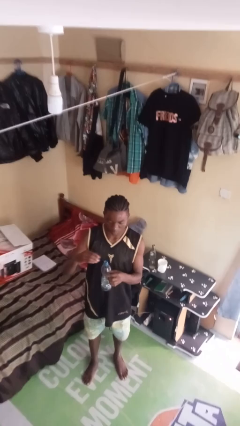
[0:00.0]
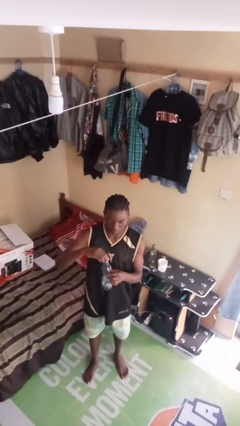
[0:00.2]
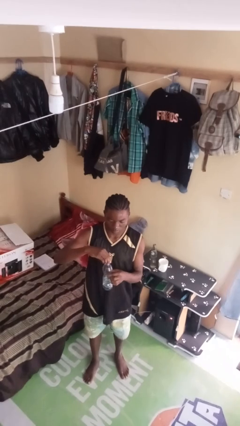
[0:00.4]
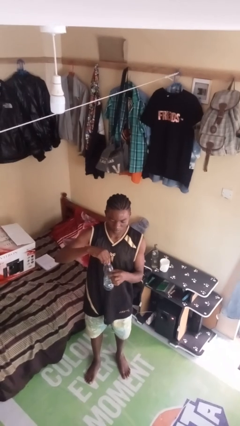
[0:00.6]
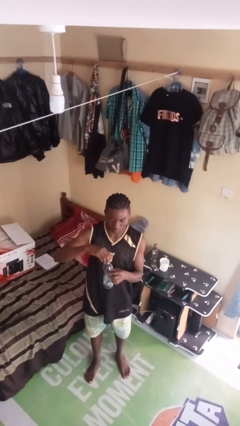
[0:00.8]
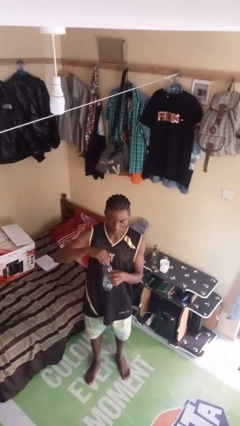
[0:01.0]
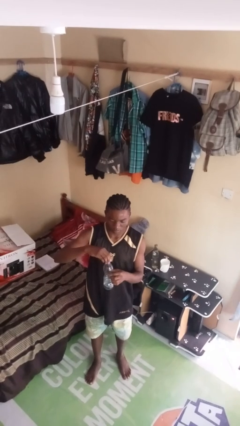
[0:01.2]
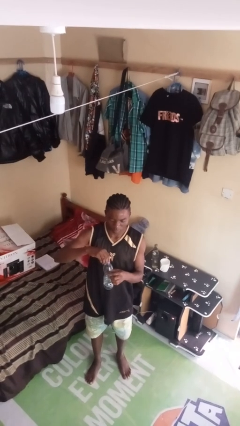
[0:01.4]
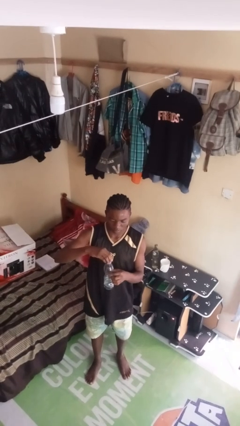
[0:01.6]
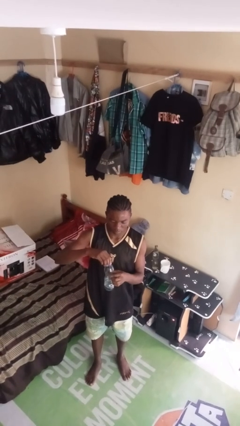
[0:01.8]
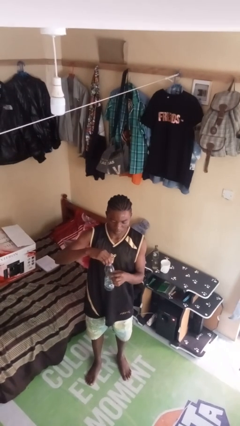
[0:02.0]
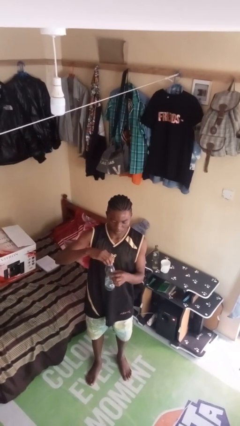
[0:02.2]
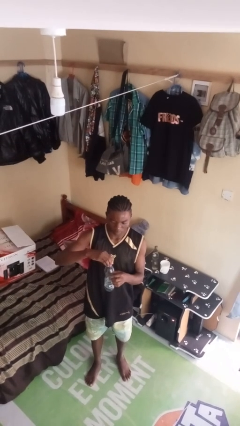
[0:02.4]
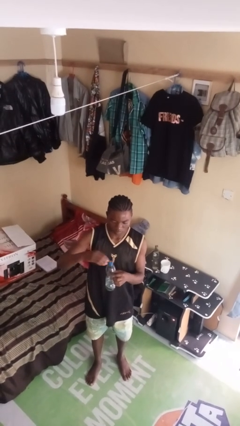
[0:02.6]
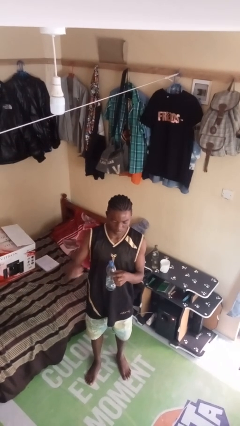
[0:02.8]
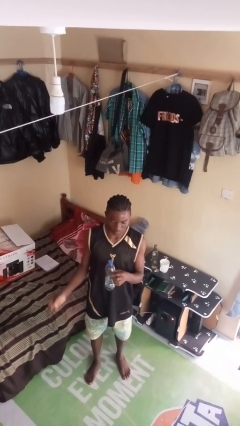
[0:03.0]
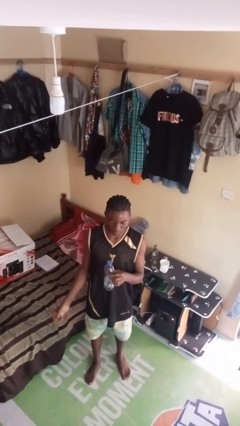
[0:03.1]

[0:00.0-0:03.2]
person screws lid to bottle

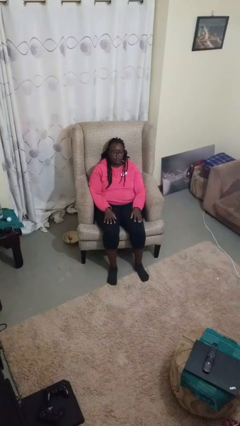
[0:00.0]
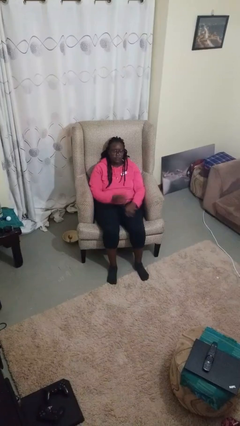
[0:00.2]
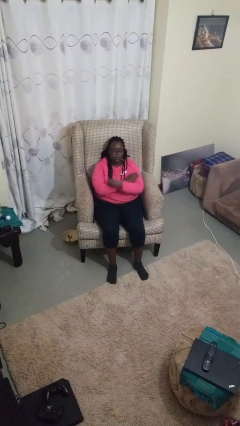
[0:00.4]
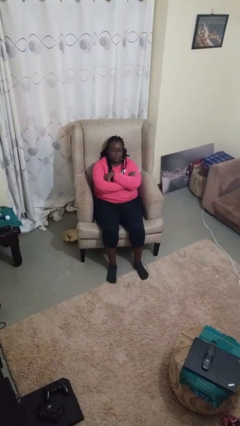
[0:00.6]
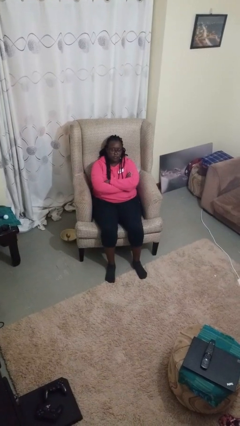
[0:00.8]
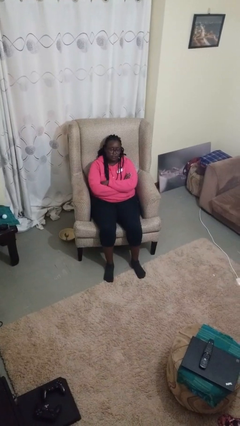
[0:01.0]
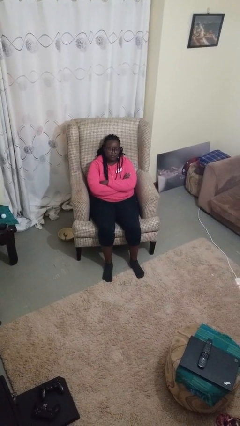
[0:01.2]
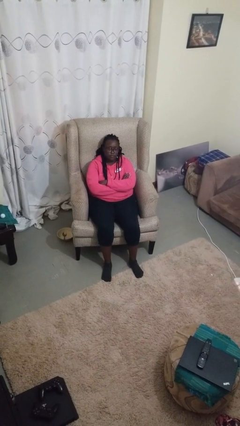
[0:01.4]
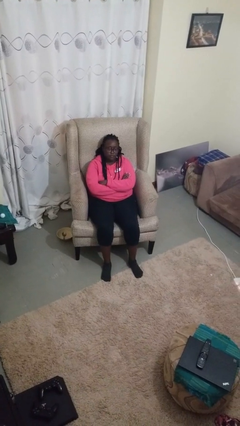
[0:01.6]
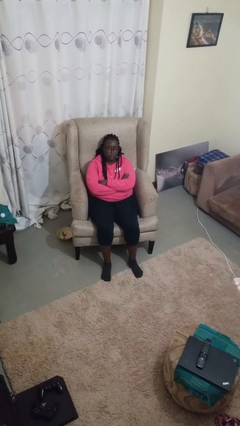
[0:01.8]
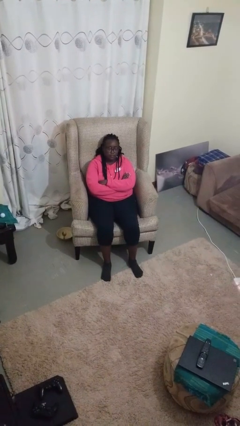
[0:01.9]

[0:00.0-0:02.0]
person crosses arms

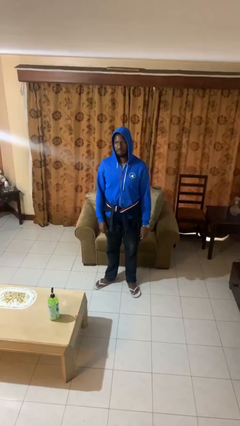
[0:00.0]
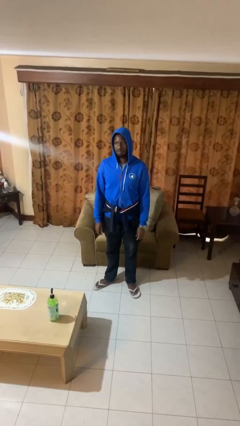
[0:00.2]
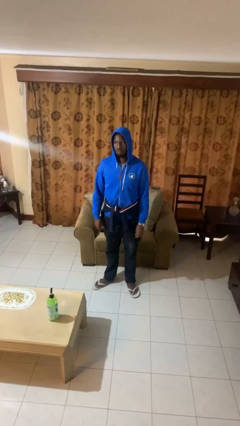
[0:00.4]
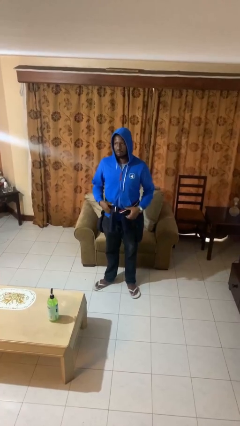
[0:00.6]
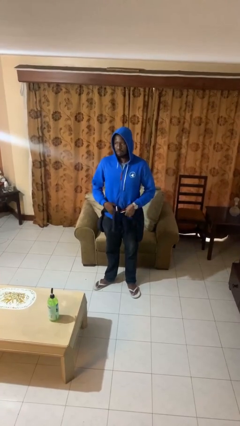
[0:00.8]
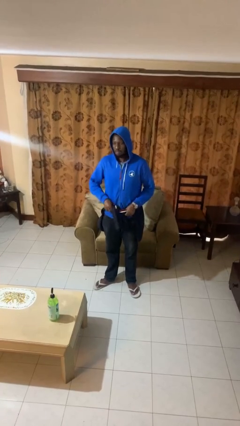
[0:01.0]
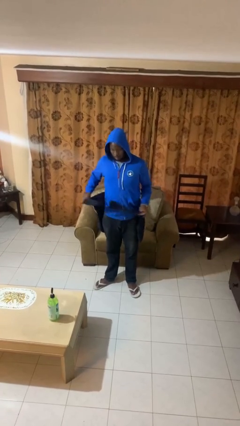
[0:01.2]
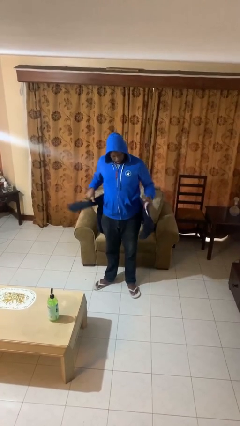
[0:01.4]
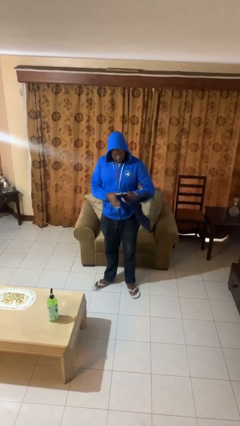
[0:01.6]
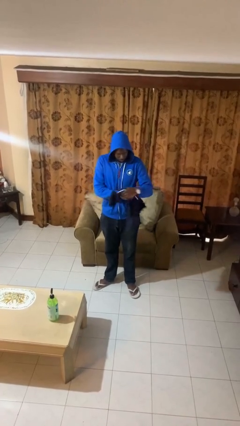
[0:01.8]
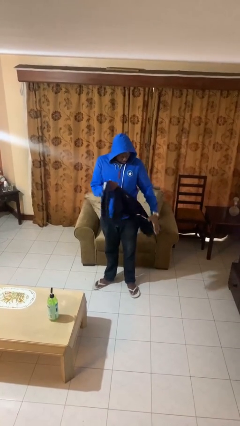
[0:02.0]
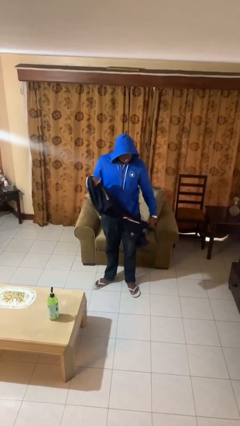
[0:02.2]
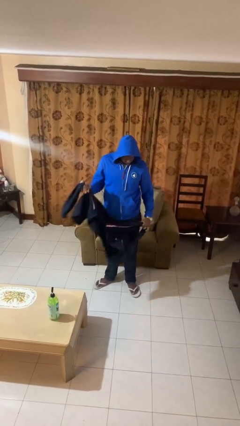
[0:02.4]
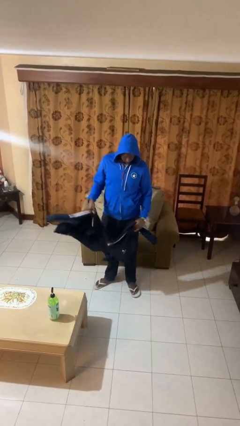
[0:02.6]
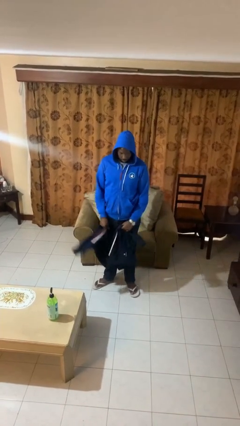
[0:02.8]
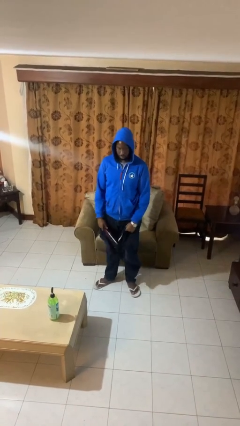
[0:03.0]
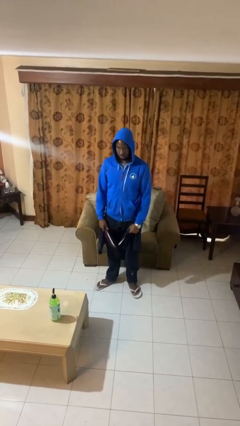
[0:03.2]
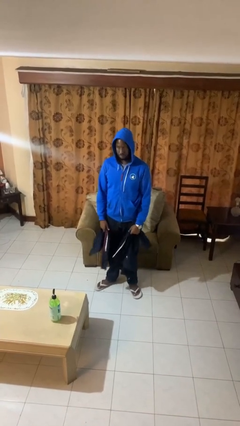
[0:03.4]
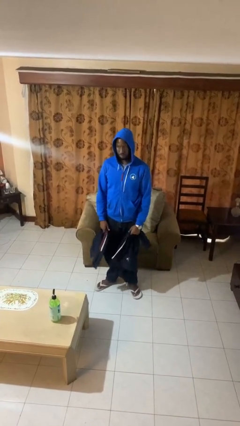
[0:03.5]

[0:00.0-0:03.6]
person unties jacket around waist

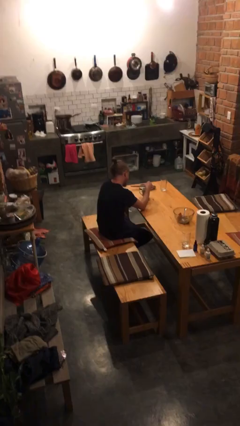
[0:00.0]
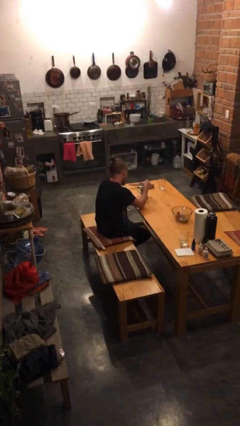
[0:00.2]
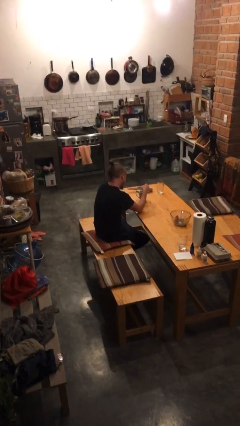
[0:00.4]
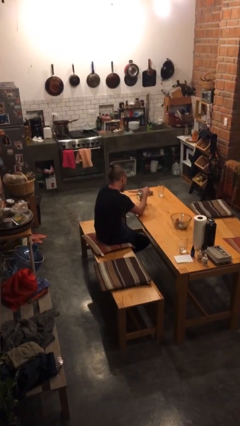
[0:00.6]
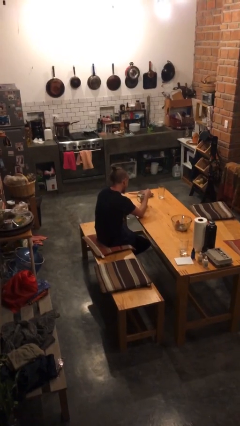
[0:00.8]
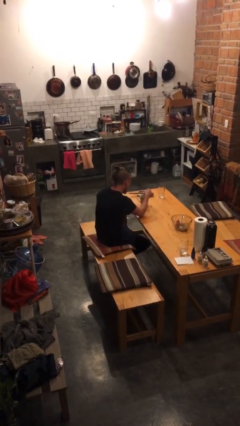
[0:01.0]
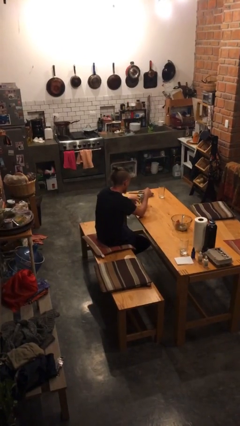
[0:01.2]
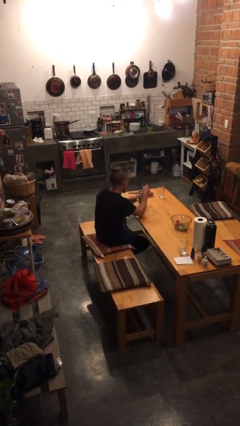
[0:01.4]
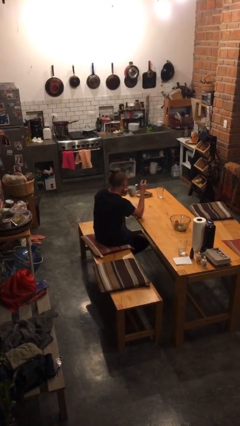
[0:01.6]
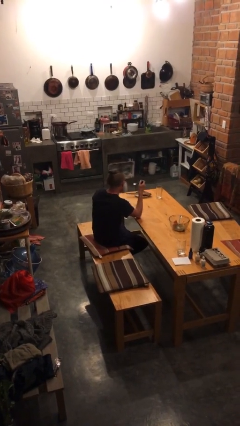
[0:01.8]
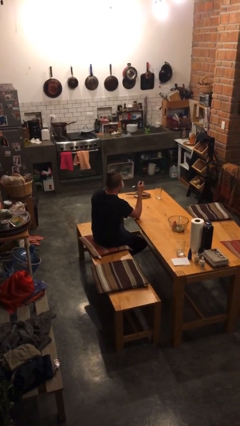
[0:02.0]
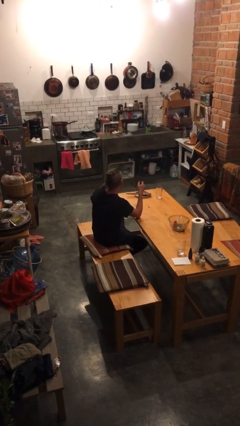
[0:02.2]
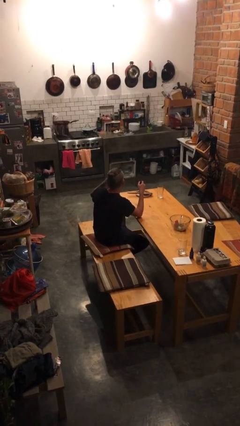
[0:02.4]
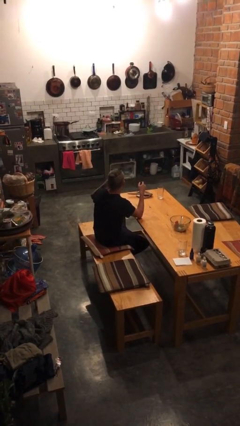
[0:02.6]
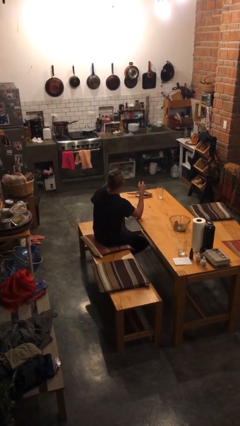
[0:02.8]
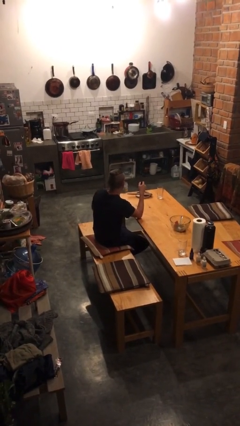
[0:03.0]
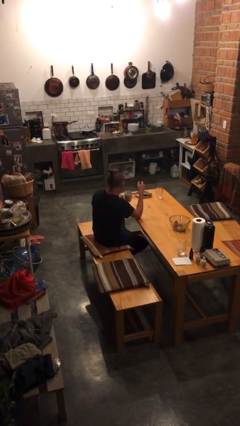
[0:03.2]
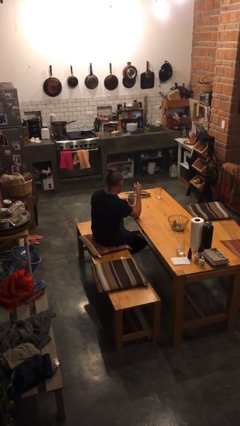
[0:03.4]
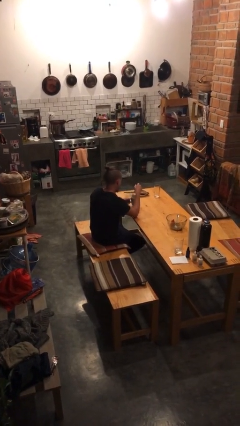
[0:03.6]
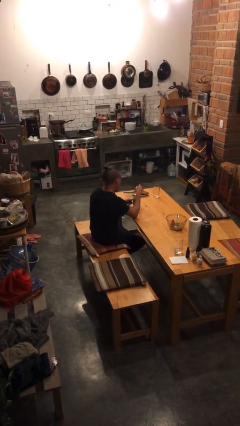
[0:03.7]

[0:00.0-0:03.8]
person drinks from mug

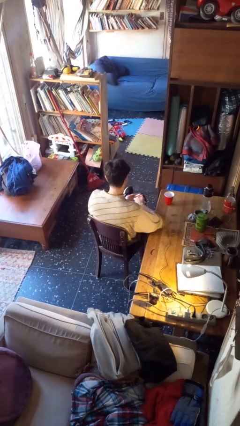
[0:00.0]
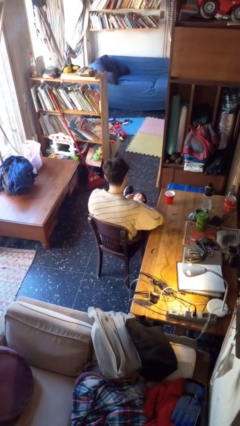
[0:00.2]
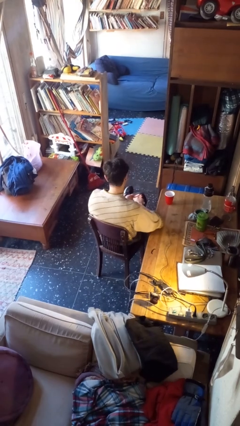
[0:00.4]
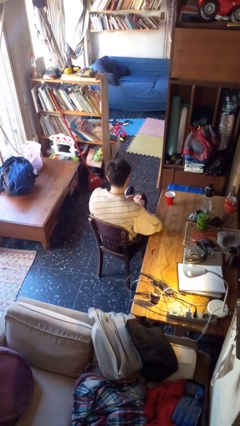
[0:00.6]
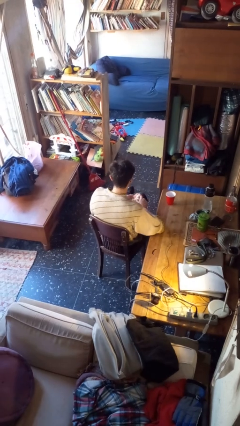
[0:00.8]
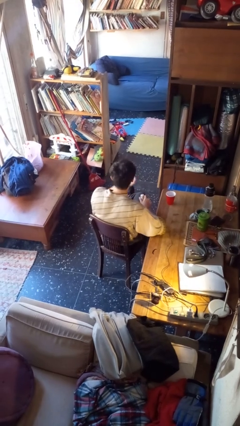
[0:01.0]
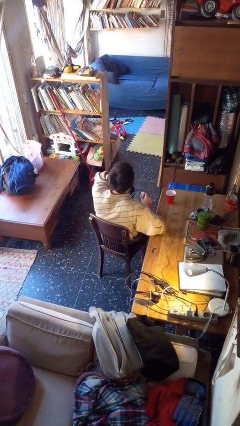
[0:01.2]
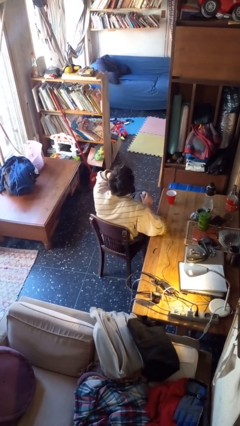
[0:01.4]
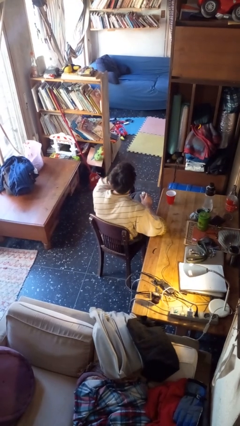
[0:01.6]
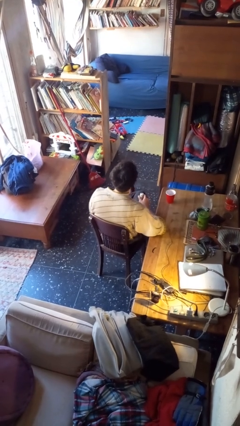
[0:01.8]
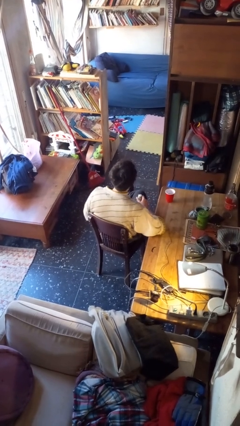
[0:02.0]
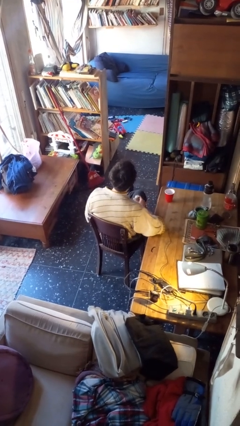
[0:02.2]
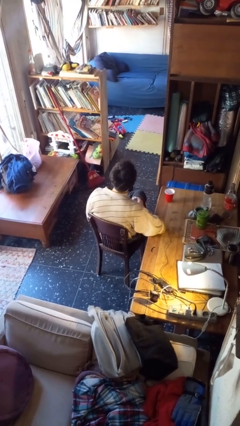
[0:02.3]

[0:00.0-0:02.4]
person takes medicine pills

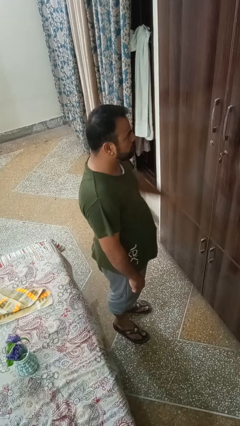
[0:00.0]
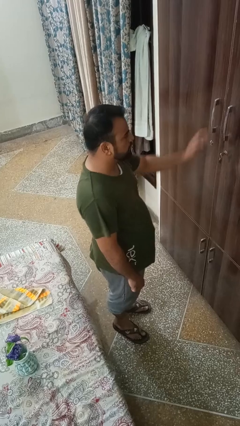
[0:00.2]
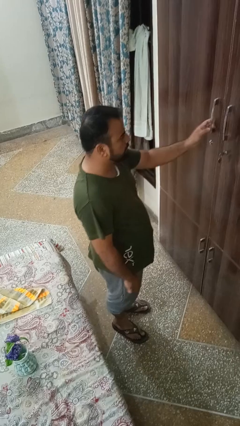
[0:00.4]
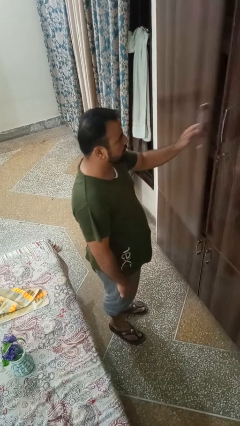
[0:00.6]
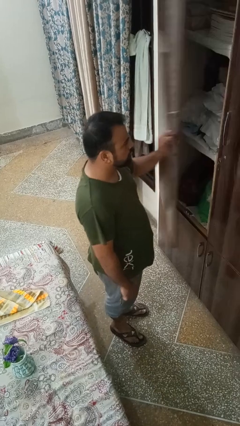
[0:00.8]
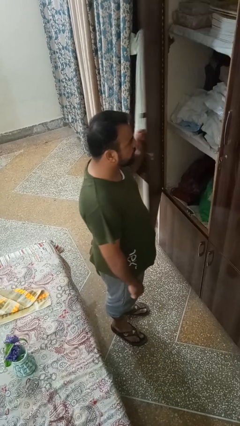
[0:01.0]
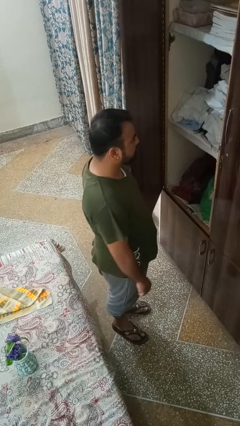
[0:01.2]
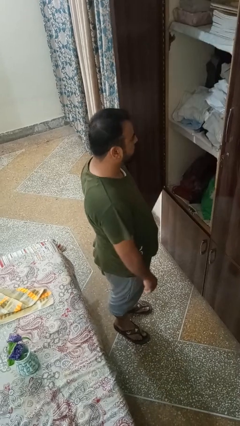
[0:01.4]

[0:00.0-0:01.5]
person opens closet door

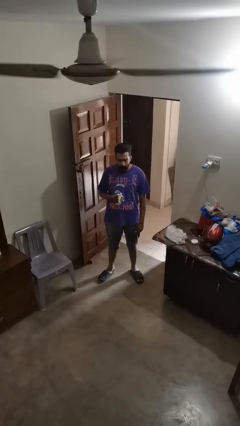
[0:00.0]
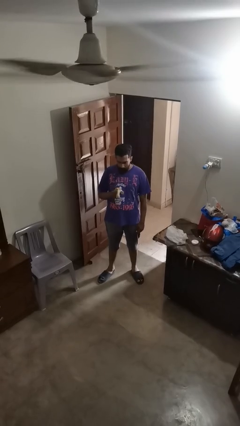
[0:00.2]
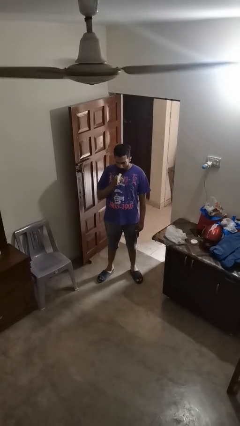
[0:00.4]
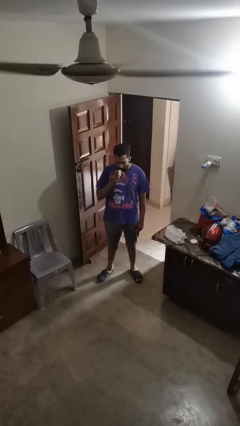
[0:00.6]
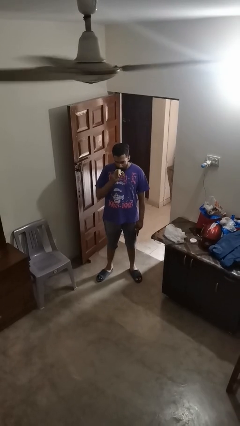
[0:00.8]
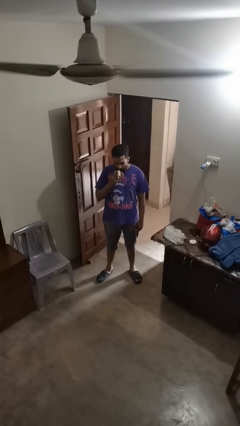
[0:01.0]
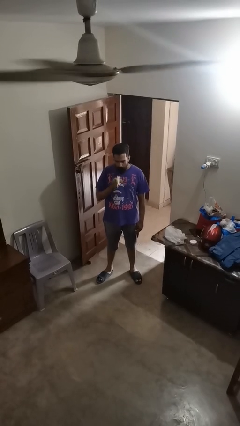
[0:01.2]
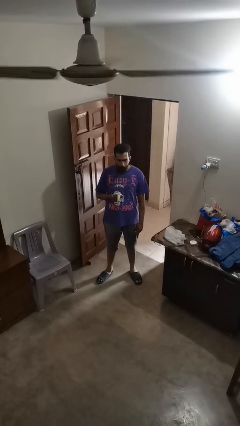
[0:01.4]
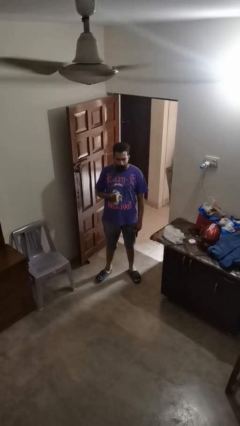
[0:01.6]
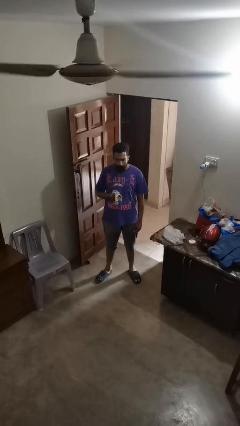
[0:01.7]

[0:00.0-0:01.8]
person eats banana
